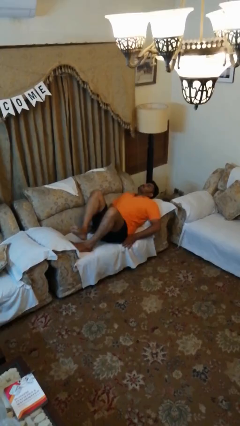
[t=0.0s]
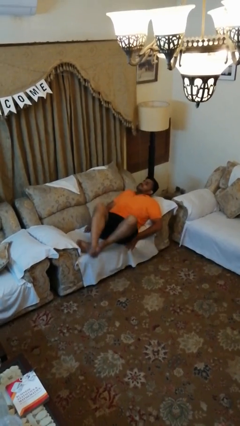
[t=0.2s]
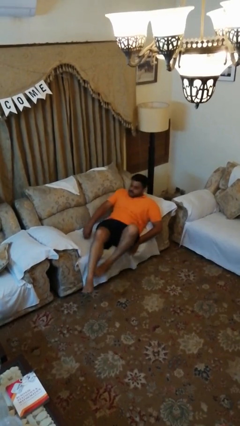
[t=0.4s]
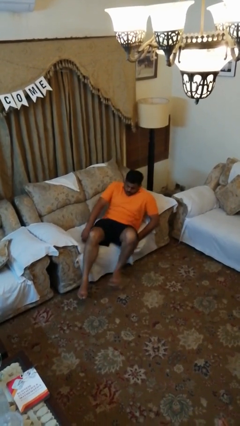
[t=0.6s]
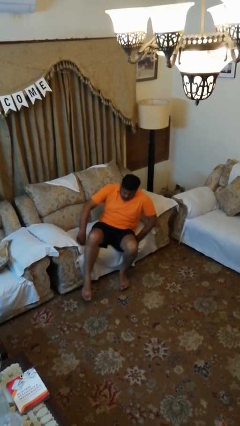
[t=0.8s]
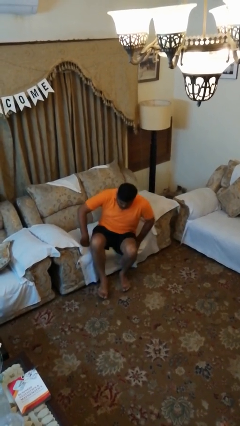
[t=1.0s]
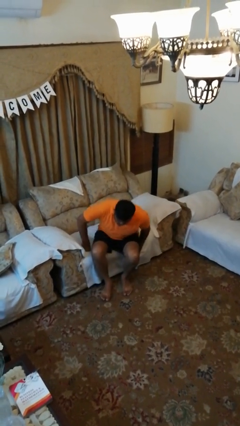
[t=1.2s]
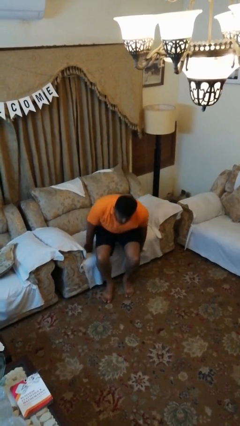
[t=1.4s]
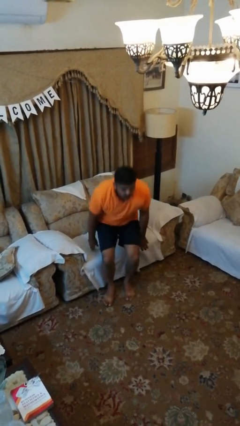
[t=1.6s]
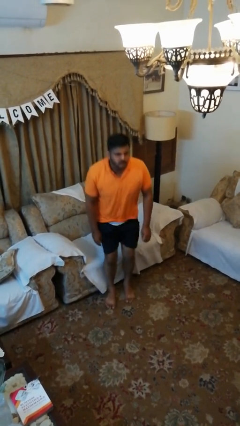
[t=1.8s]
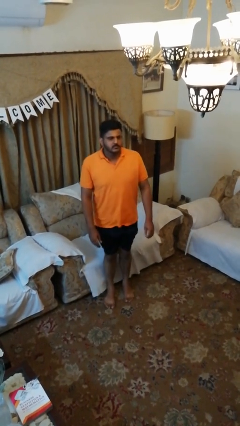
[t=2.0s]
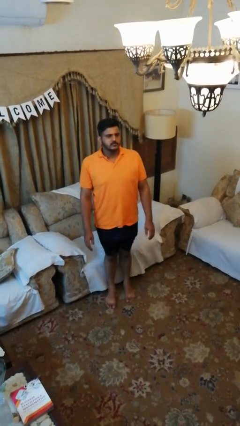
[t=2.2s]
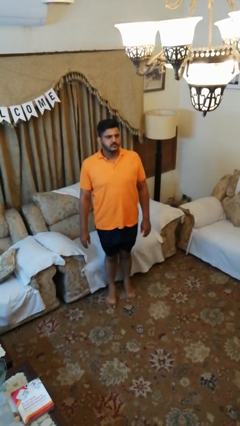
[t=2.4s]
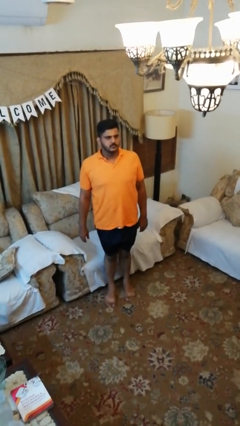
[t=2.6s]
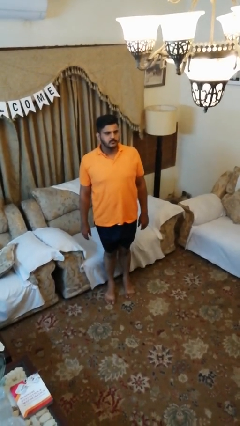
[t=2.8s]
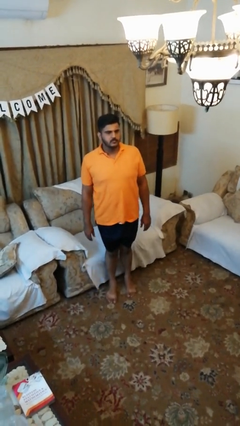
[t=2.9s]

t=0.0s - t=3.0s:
person stands up

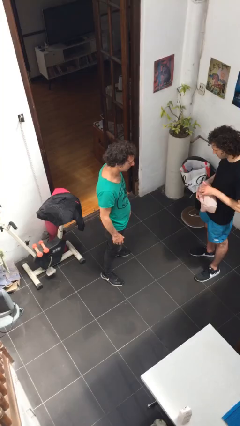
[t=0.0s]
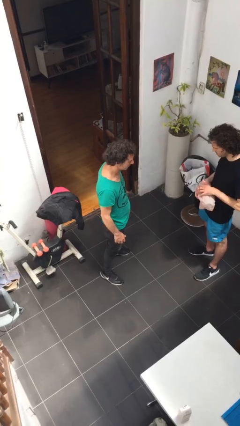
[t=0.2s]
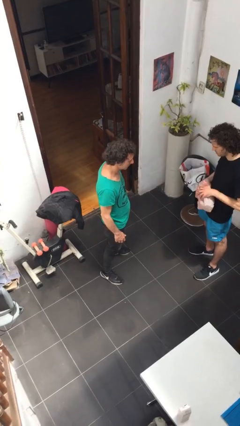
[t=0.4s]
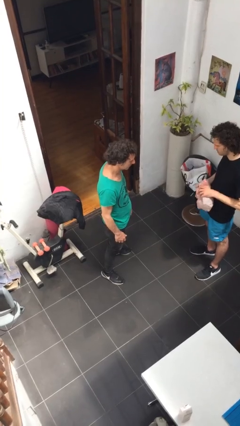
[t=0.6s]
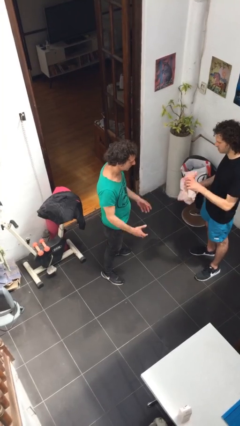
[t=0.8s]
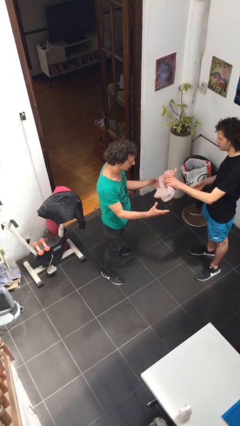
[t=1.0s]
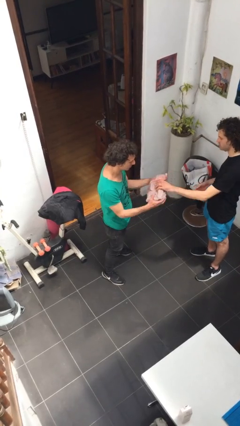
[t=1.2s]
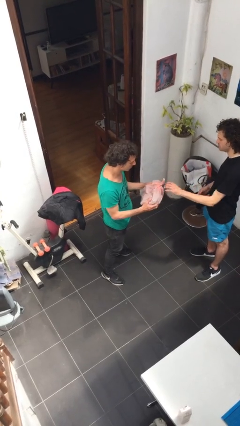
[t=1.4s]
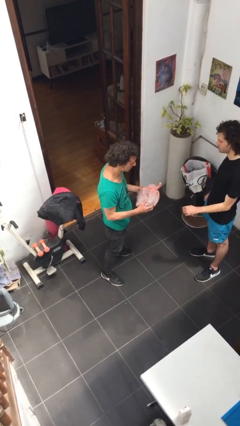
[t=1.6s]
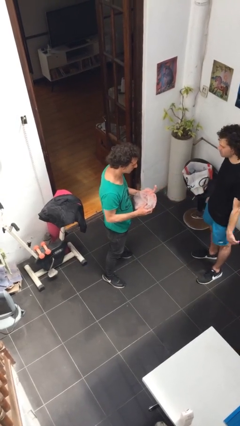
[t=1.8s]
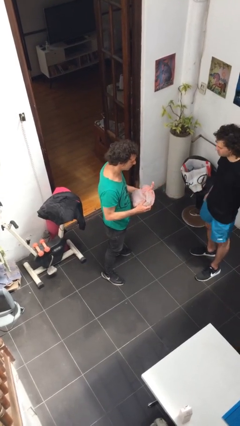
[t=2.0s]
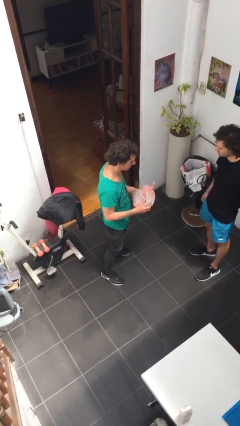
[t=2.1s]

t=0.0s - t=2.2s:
person transfers object to person

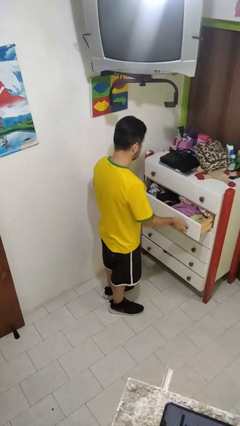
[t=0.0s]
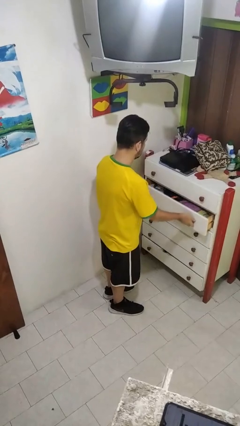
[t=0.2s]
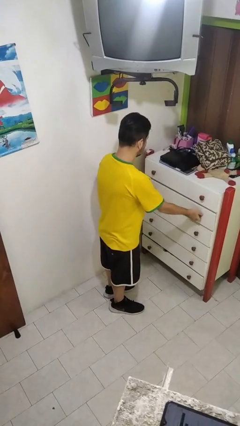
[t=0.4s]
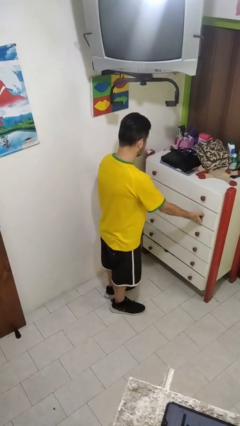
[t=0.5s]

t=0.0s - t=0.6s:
person closes dresser drawer

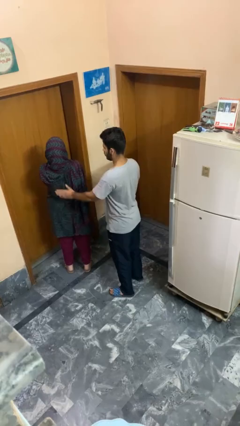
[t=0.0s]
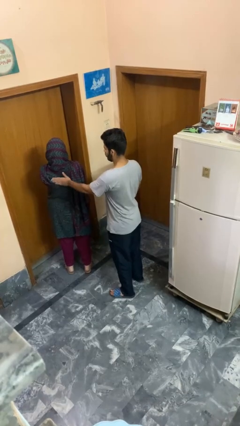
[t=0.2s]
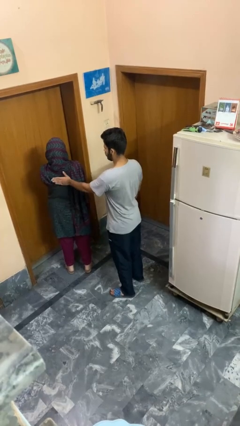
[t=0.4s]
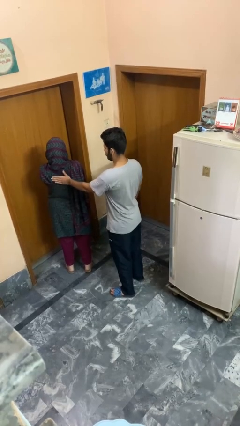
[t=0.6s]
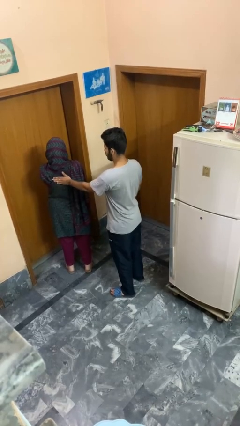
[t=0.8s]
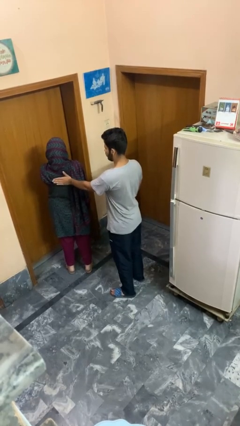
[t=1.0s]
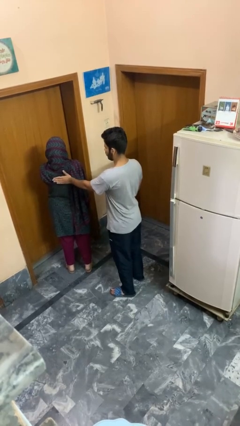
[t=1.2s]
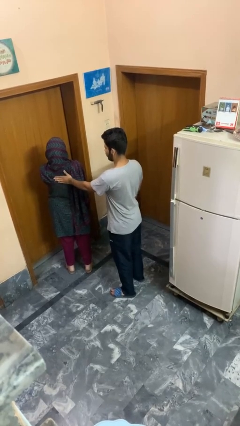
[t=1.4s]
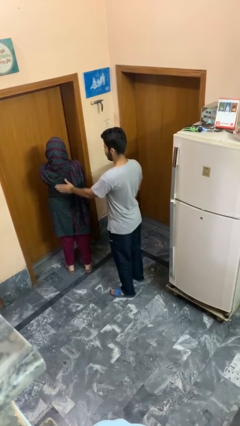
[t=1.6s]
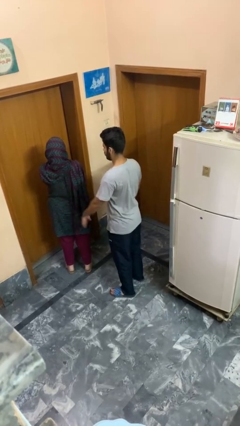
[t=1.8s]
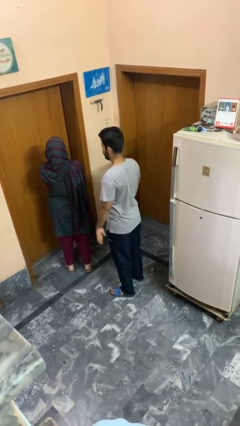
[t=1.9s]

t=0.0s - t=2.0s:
person touches back of person

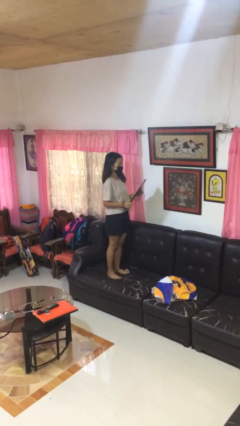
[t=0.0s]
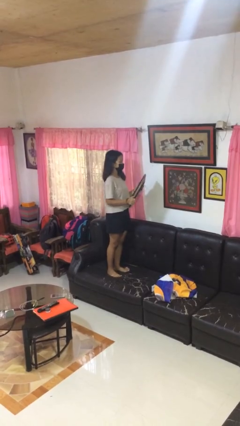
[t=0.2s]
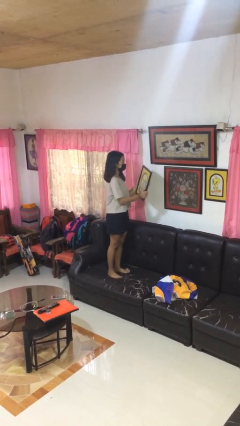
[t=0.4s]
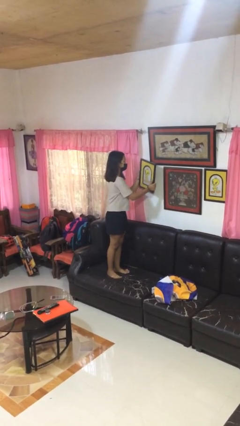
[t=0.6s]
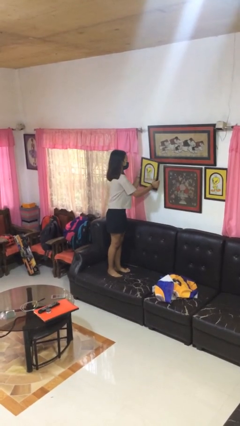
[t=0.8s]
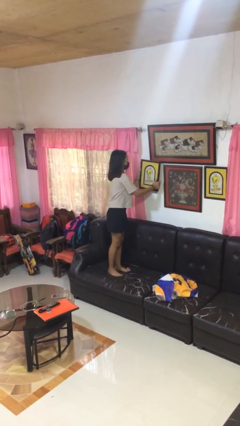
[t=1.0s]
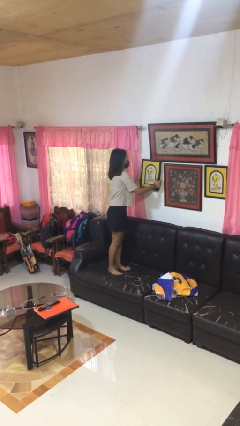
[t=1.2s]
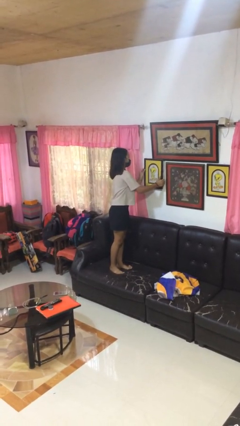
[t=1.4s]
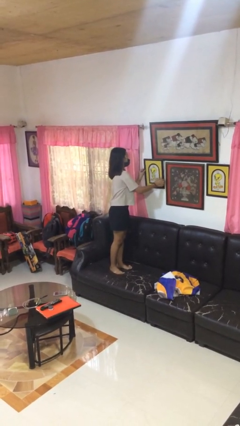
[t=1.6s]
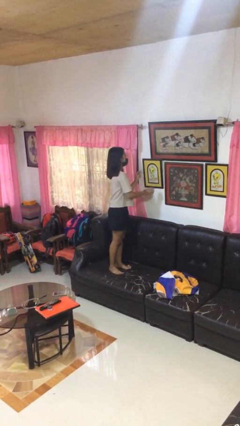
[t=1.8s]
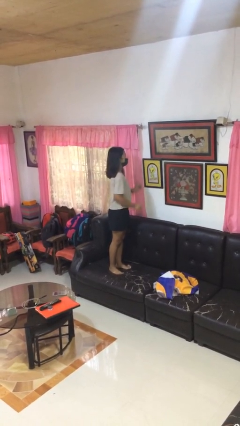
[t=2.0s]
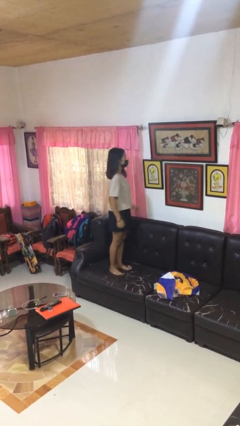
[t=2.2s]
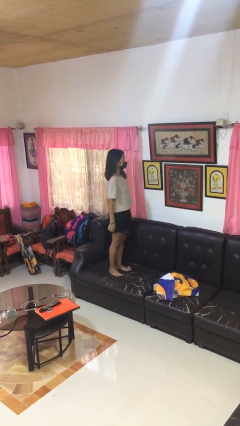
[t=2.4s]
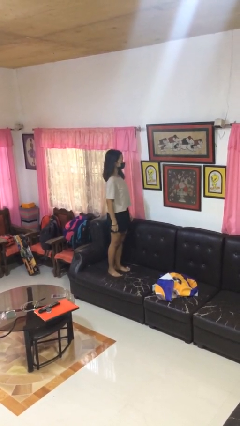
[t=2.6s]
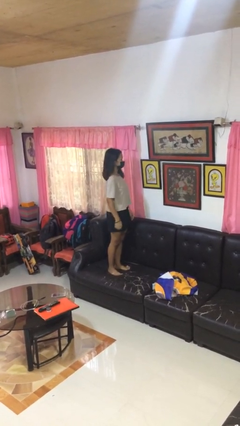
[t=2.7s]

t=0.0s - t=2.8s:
person puts up picture frame

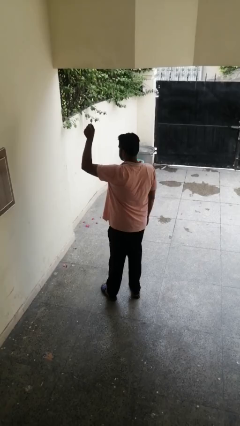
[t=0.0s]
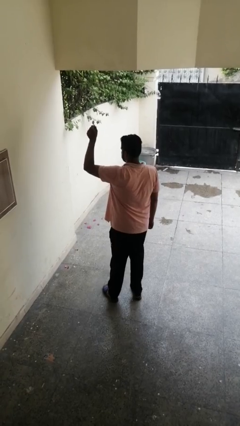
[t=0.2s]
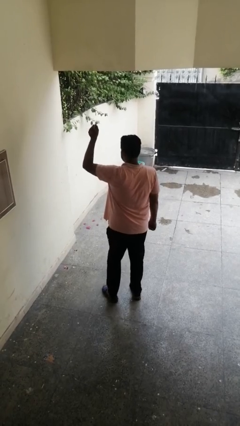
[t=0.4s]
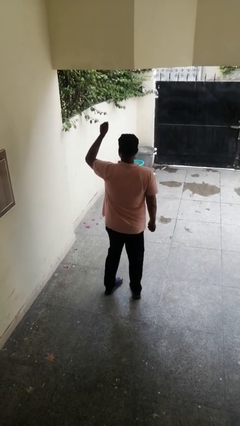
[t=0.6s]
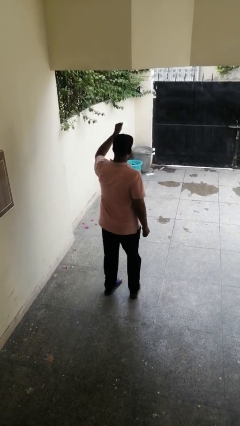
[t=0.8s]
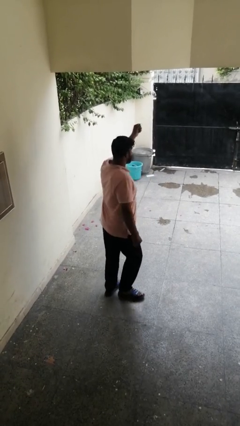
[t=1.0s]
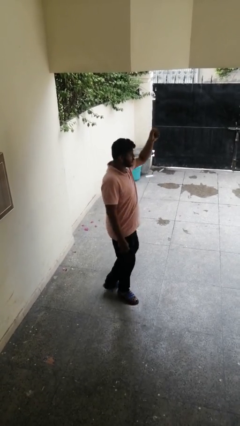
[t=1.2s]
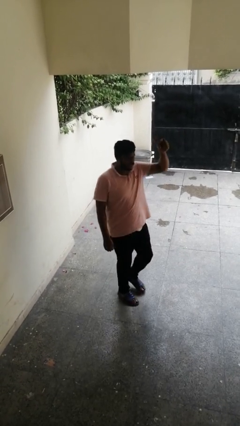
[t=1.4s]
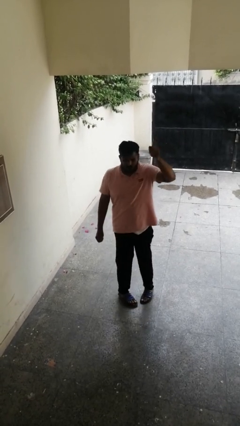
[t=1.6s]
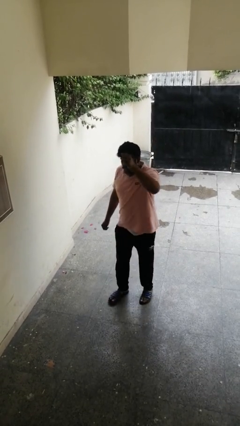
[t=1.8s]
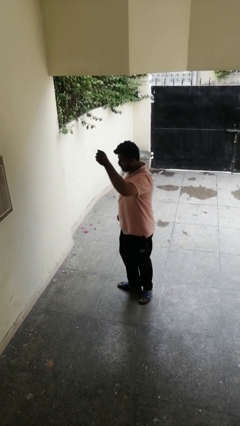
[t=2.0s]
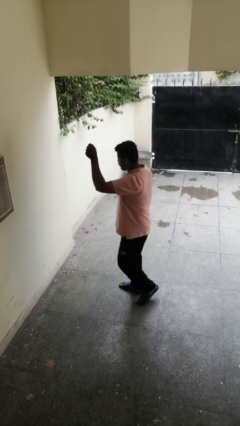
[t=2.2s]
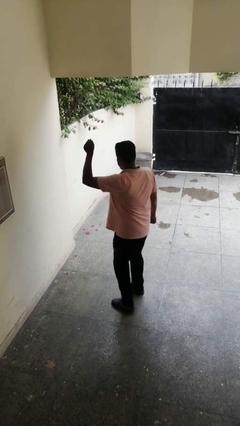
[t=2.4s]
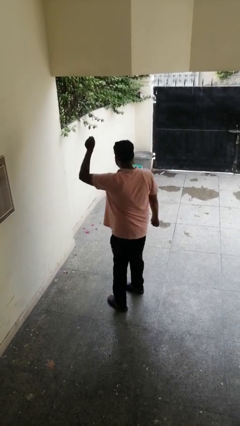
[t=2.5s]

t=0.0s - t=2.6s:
person twirls

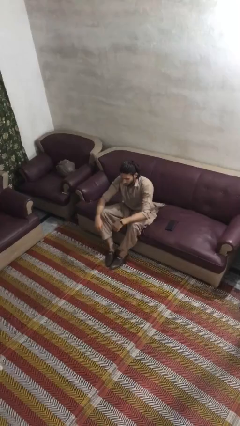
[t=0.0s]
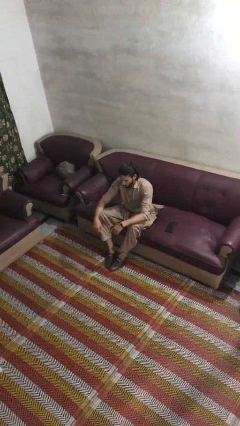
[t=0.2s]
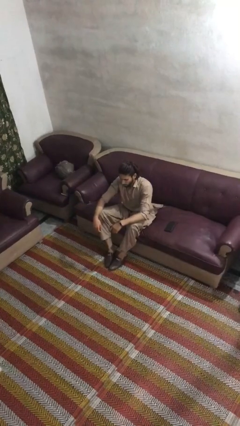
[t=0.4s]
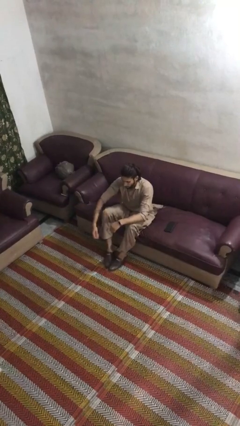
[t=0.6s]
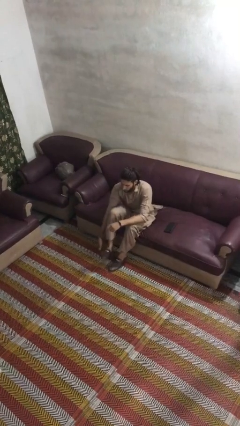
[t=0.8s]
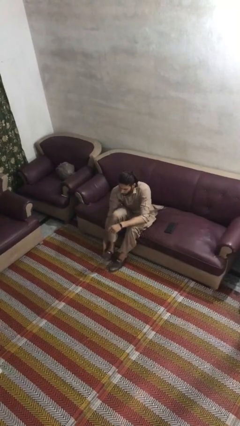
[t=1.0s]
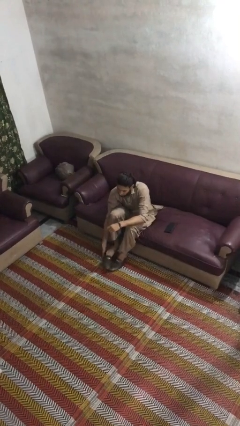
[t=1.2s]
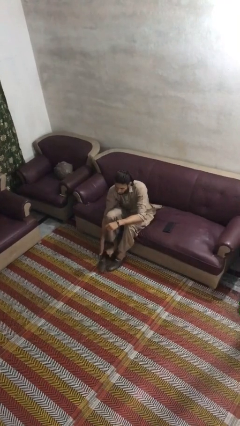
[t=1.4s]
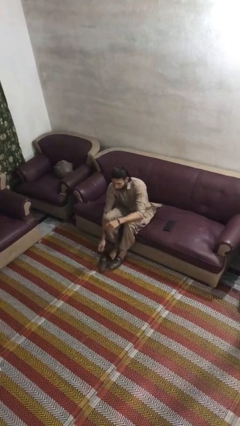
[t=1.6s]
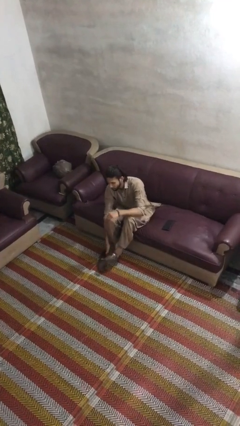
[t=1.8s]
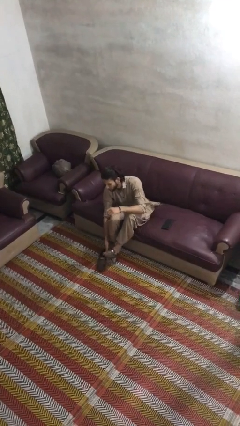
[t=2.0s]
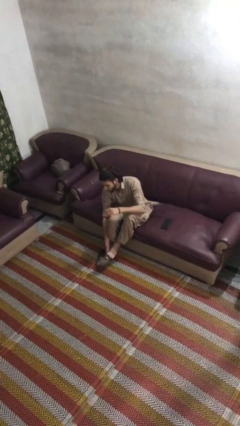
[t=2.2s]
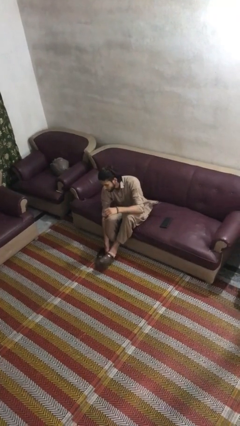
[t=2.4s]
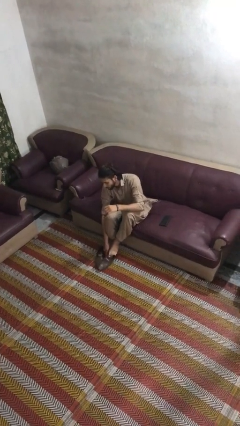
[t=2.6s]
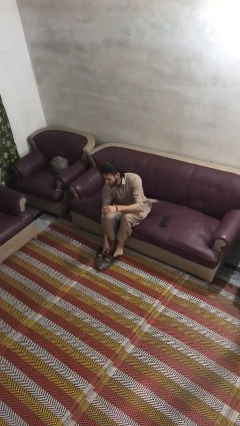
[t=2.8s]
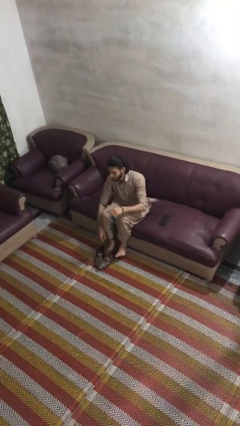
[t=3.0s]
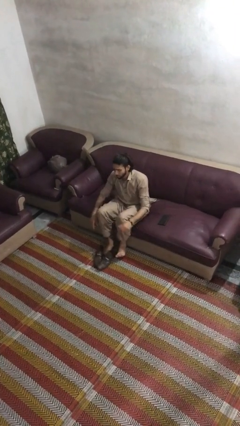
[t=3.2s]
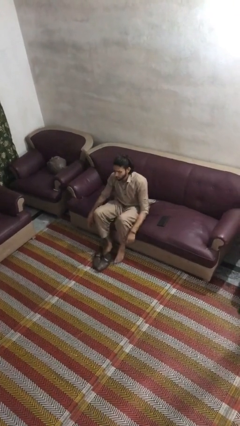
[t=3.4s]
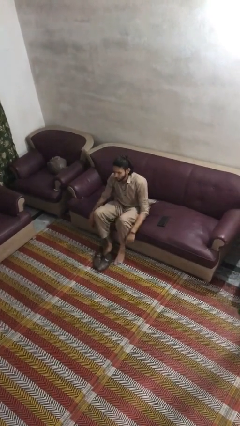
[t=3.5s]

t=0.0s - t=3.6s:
person takes off shoes

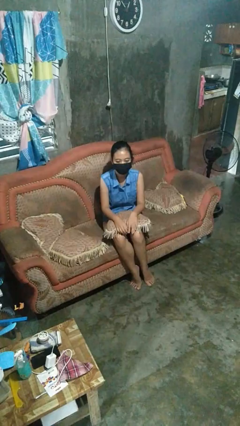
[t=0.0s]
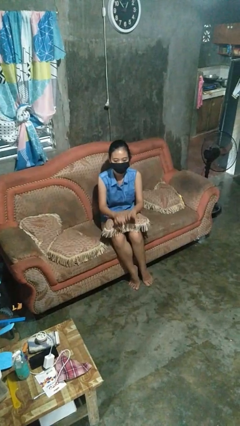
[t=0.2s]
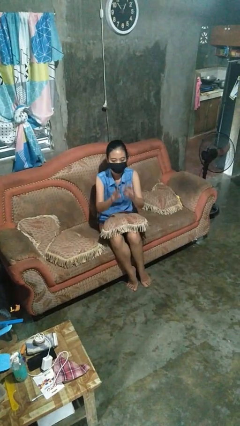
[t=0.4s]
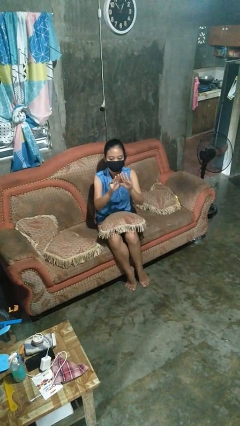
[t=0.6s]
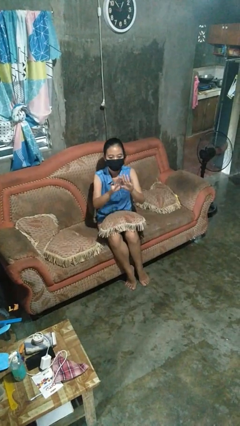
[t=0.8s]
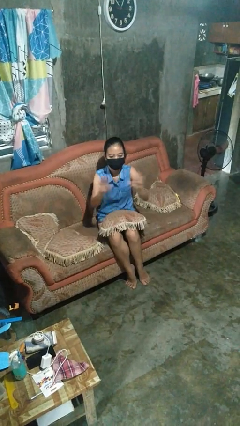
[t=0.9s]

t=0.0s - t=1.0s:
person gestures zoom in
